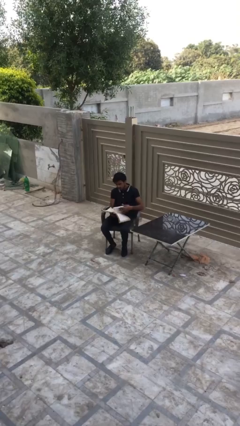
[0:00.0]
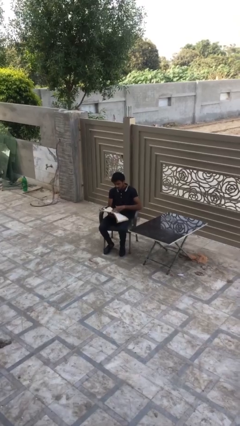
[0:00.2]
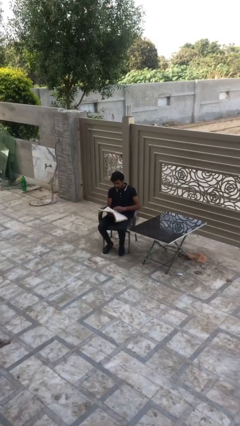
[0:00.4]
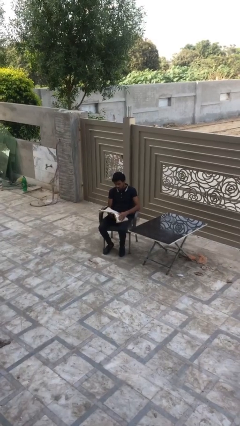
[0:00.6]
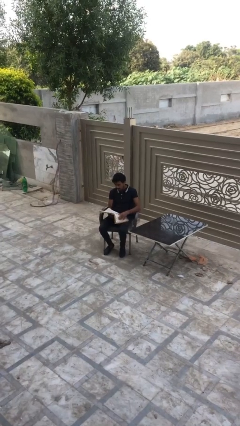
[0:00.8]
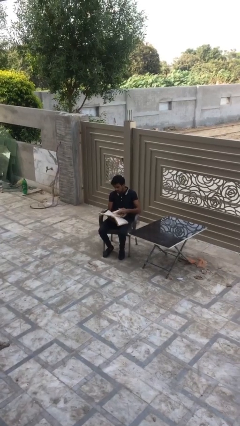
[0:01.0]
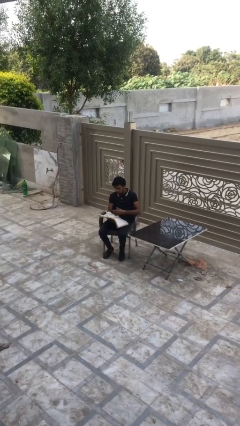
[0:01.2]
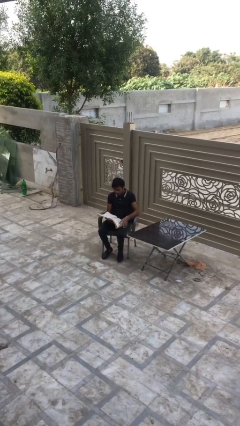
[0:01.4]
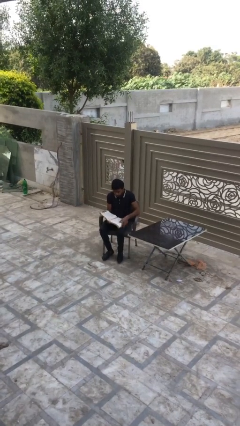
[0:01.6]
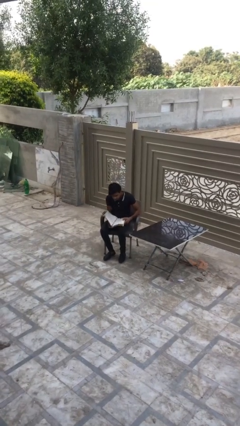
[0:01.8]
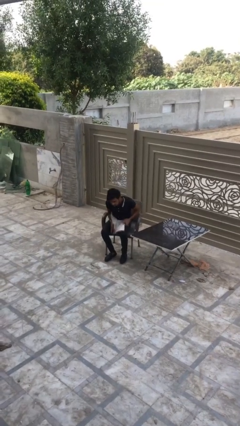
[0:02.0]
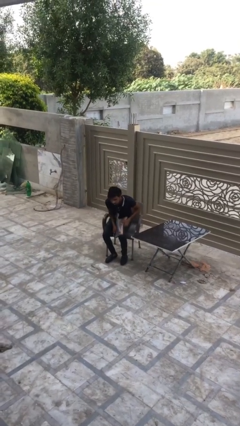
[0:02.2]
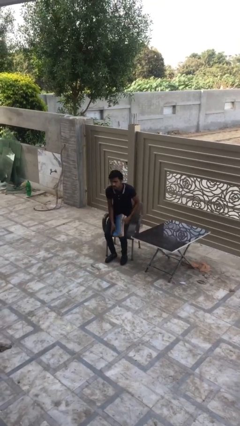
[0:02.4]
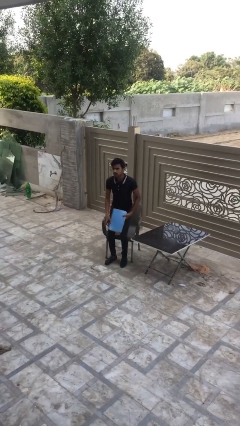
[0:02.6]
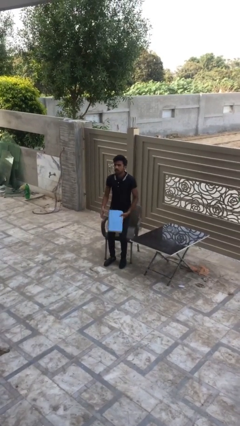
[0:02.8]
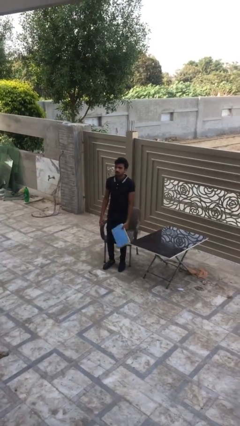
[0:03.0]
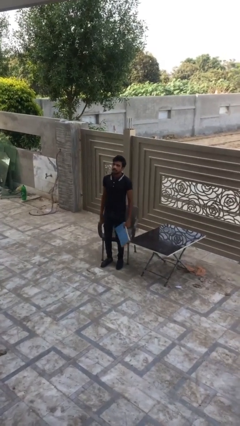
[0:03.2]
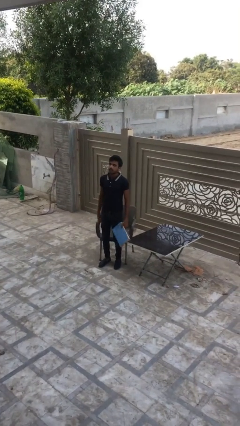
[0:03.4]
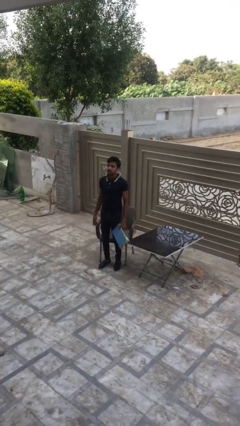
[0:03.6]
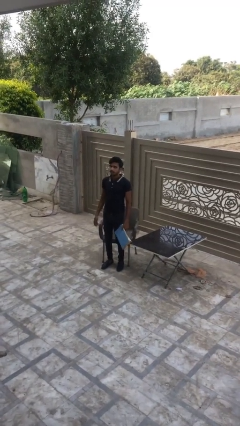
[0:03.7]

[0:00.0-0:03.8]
person stands up

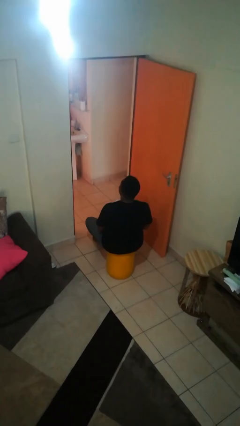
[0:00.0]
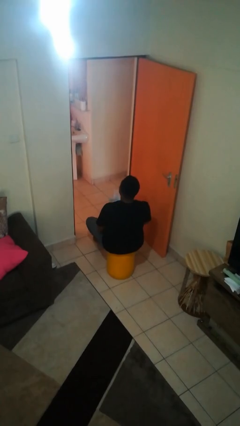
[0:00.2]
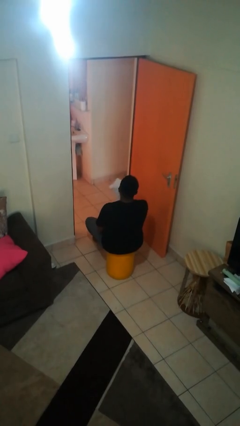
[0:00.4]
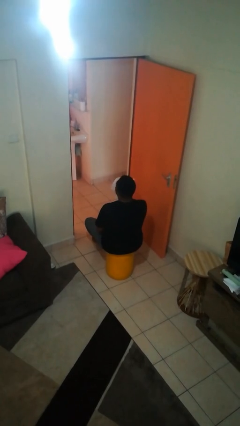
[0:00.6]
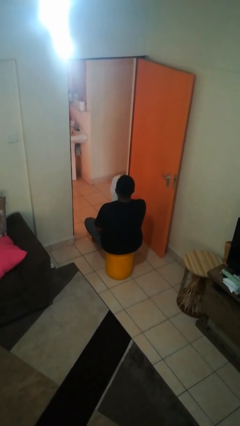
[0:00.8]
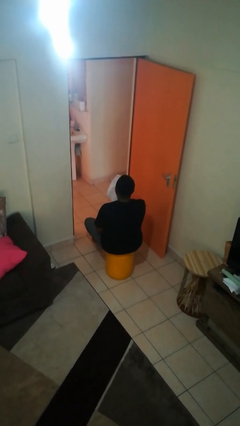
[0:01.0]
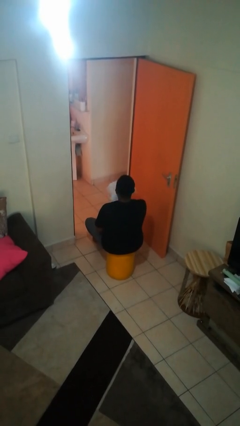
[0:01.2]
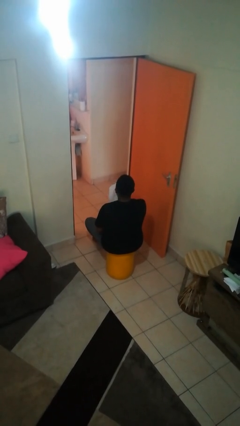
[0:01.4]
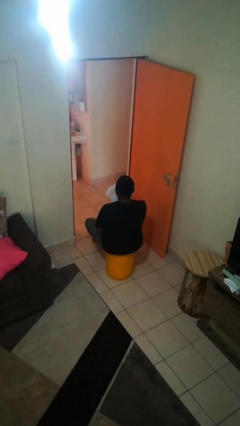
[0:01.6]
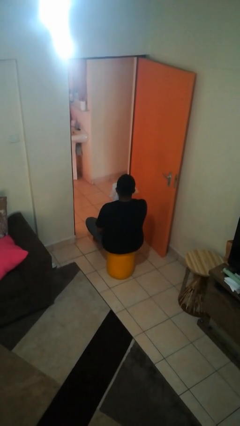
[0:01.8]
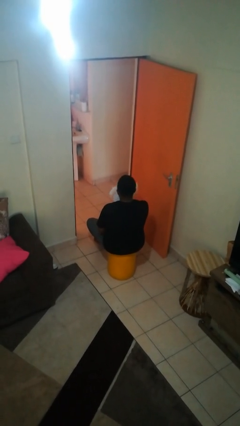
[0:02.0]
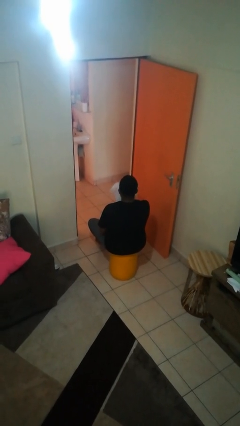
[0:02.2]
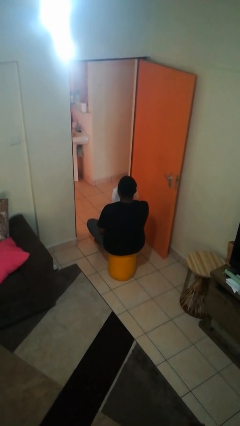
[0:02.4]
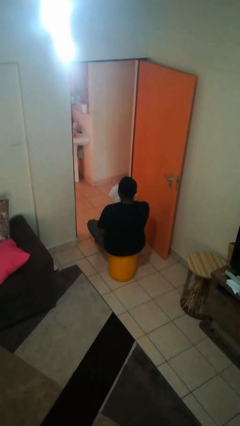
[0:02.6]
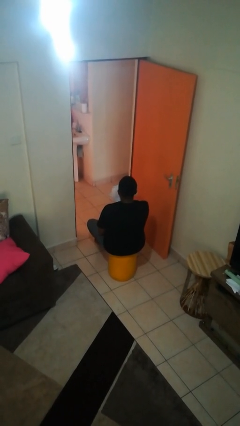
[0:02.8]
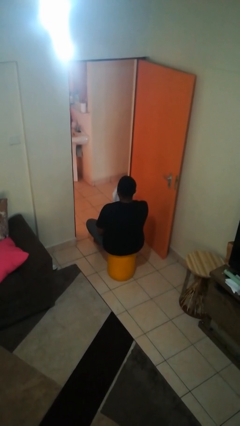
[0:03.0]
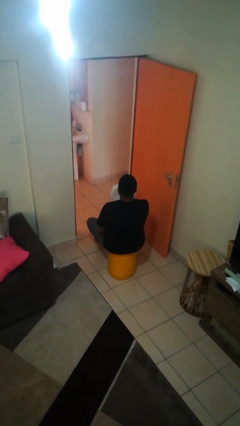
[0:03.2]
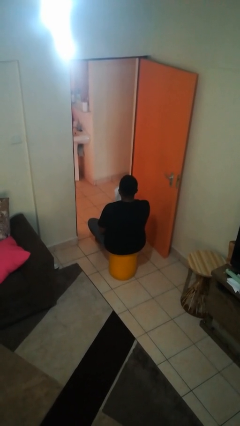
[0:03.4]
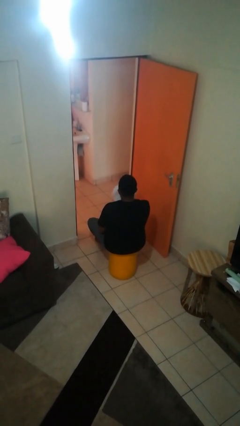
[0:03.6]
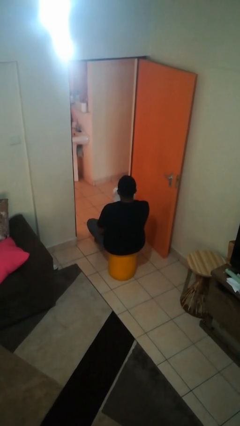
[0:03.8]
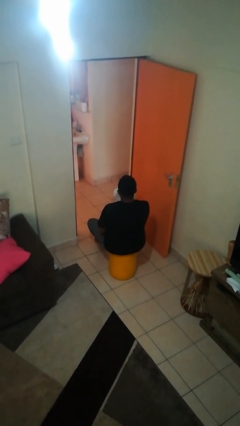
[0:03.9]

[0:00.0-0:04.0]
person wipes mouth with napkin

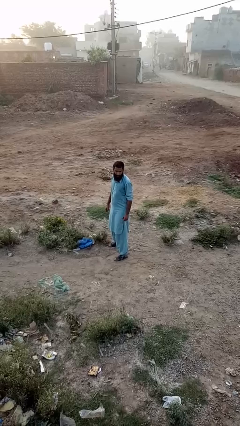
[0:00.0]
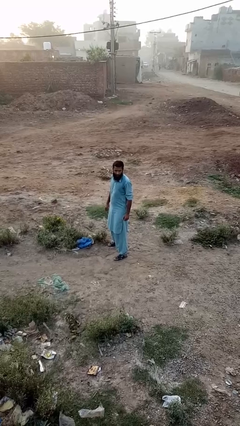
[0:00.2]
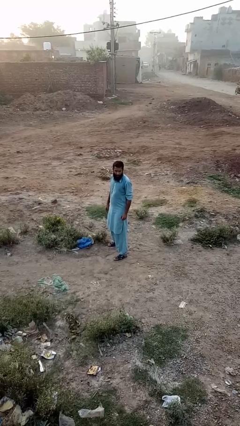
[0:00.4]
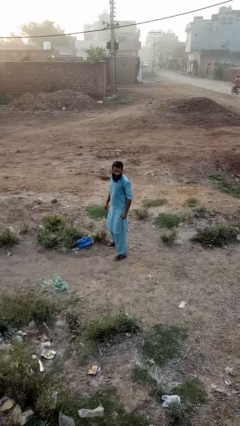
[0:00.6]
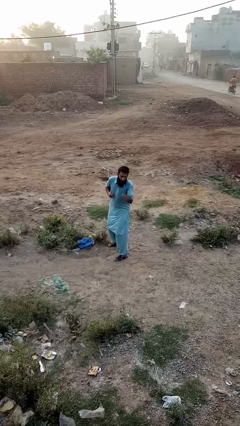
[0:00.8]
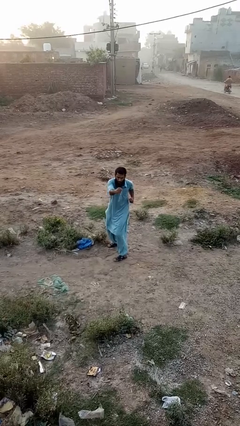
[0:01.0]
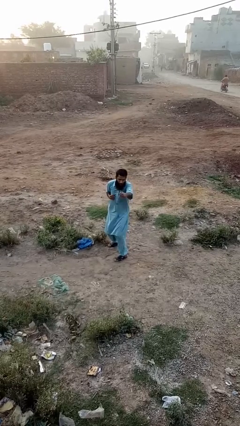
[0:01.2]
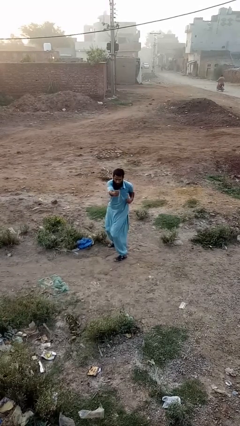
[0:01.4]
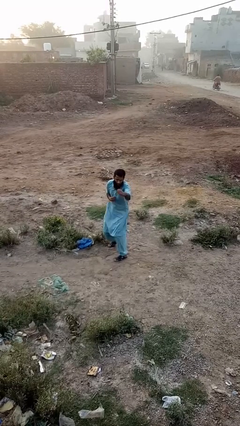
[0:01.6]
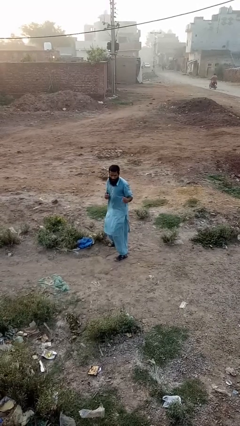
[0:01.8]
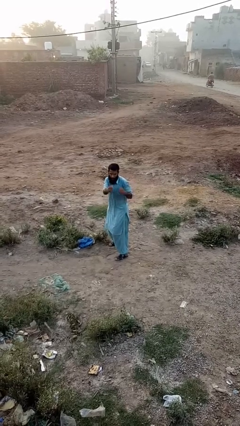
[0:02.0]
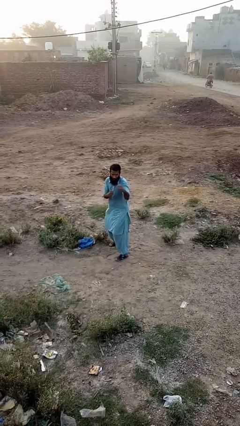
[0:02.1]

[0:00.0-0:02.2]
person punches

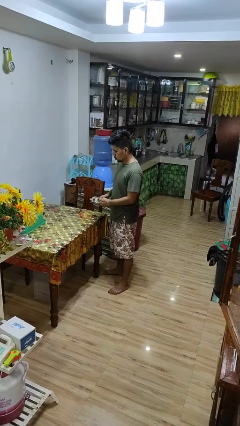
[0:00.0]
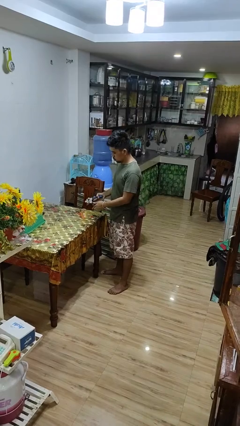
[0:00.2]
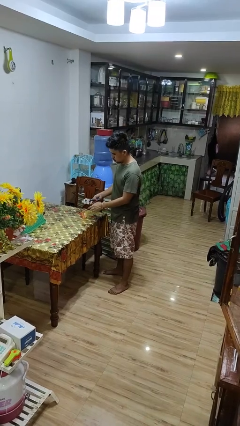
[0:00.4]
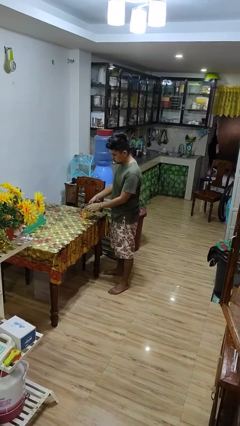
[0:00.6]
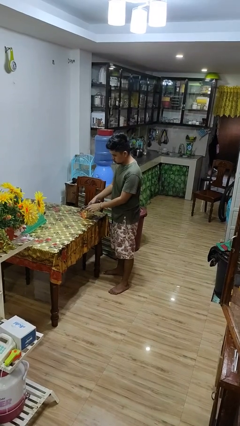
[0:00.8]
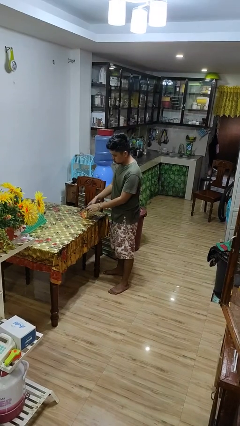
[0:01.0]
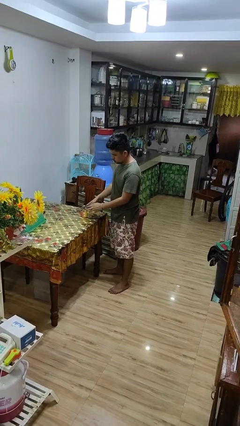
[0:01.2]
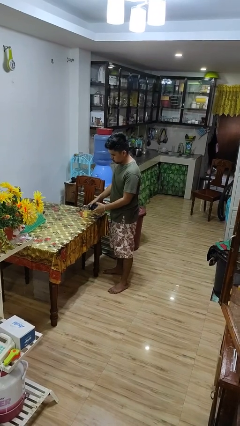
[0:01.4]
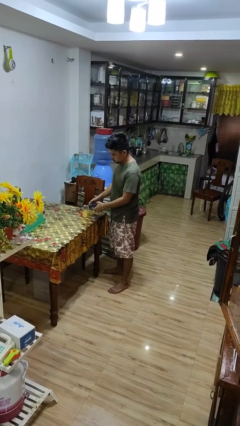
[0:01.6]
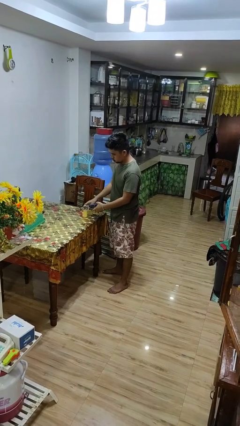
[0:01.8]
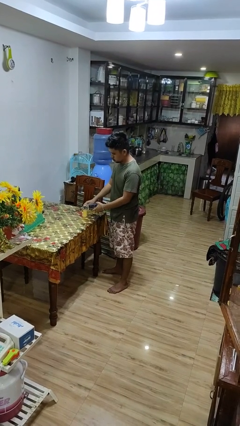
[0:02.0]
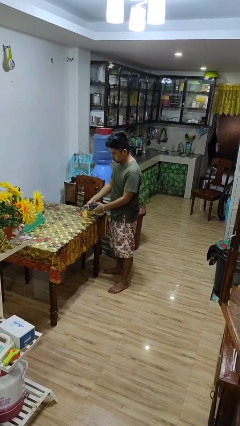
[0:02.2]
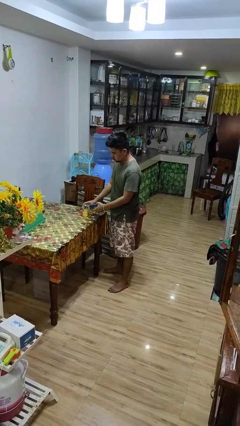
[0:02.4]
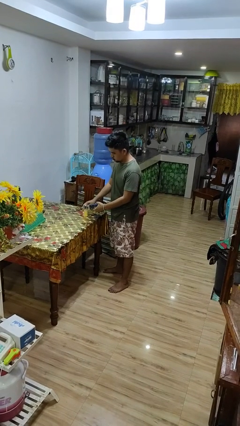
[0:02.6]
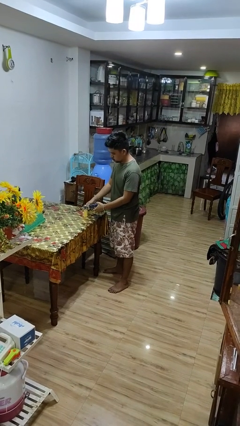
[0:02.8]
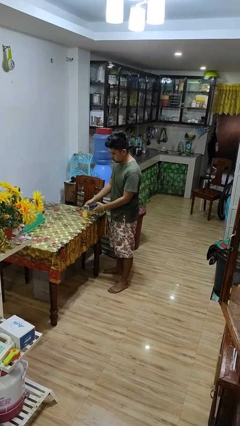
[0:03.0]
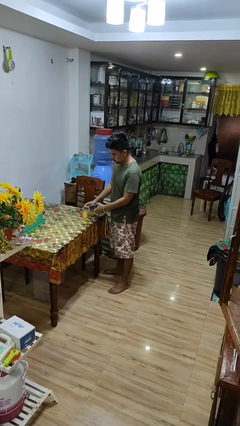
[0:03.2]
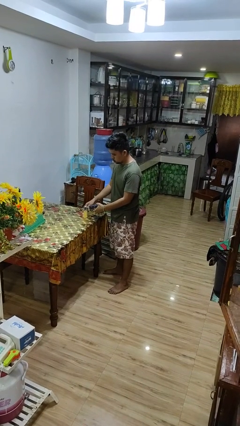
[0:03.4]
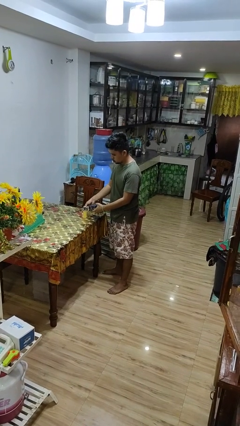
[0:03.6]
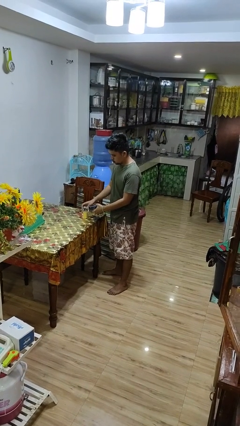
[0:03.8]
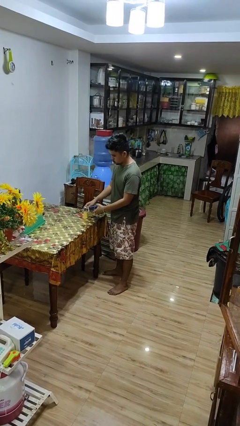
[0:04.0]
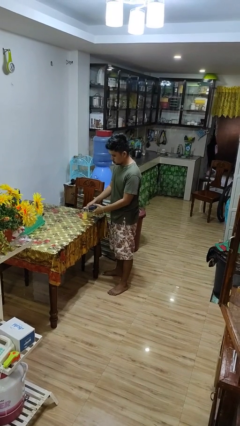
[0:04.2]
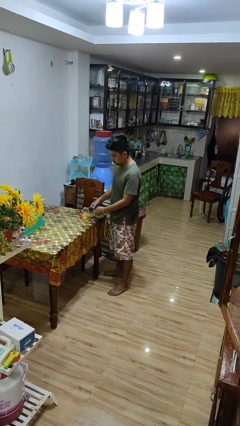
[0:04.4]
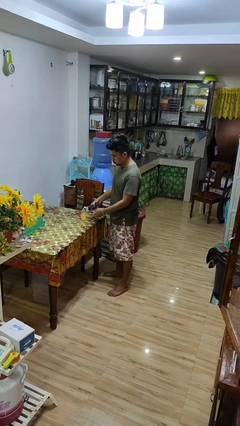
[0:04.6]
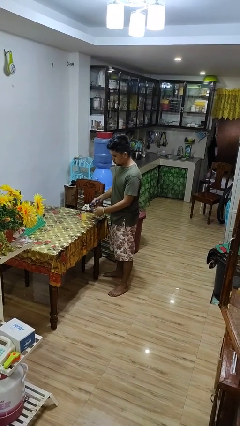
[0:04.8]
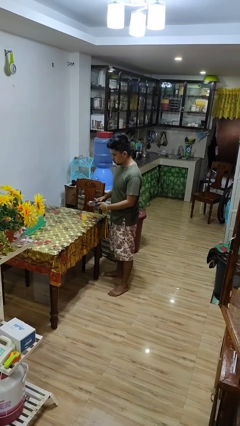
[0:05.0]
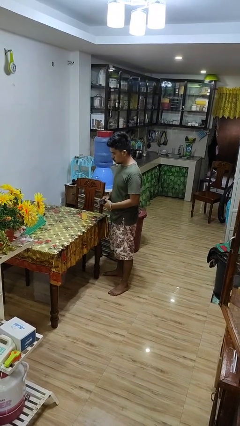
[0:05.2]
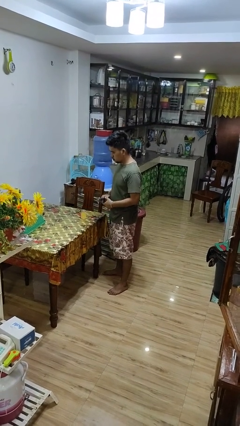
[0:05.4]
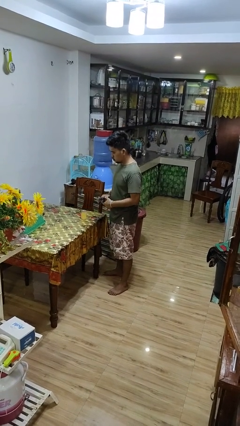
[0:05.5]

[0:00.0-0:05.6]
person opens can with can opener

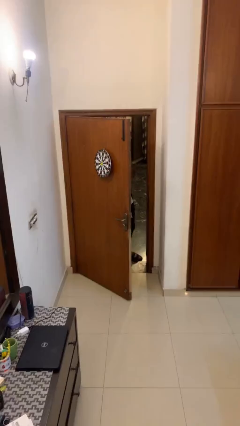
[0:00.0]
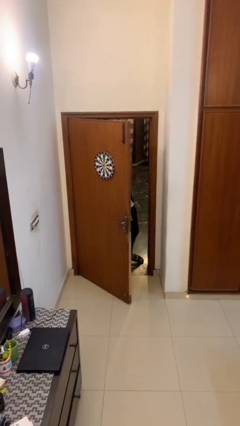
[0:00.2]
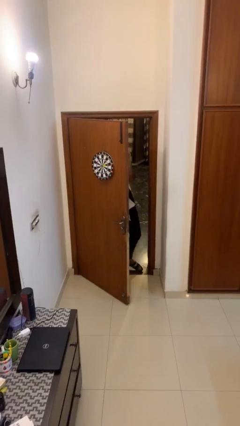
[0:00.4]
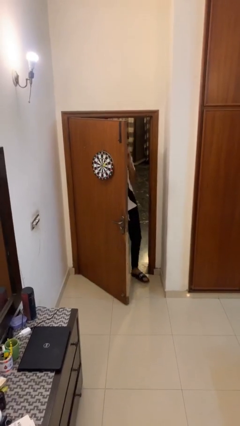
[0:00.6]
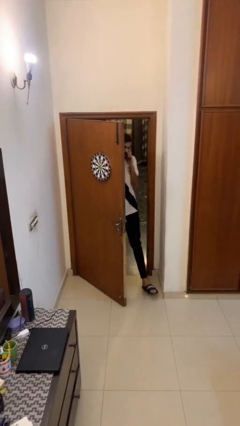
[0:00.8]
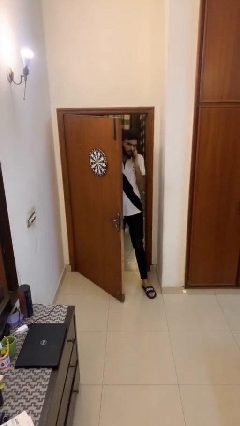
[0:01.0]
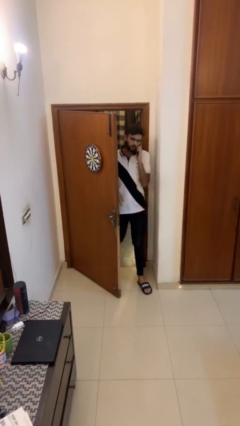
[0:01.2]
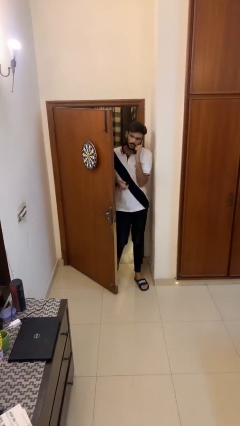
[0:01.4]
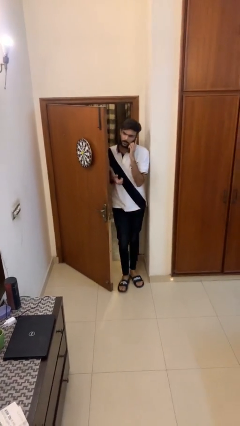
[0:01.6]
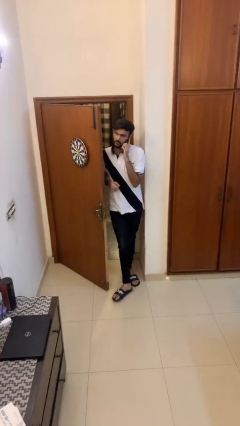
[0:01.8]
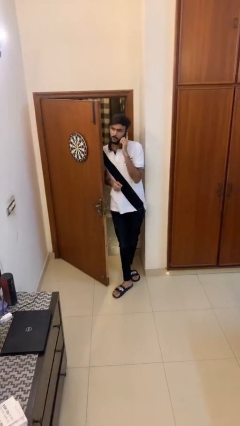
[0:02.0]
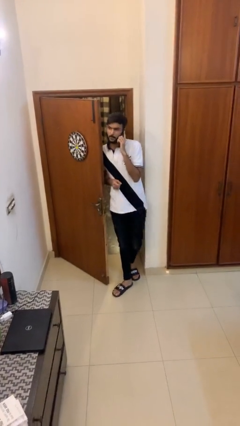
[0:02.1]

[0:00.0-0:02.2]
person enters scene through structure
